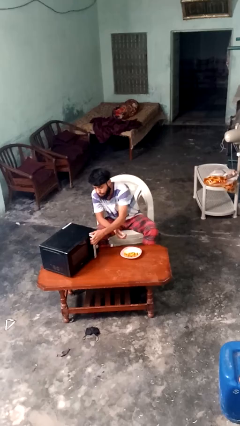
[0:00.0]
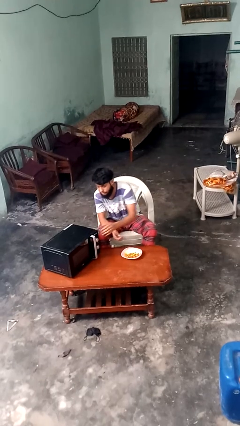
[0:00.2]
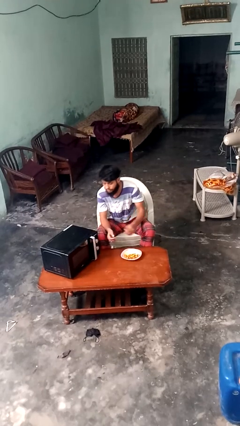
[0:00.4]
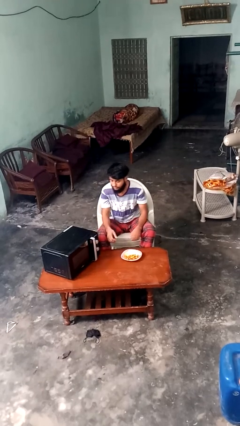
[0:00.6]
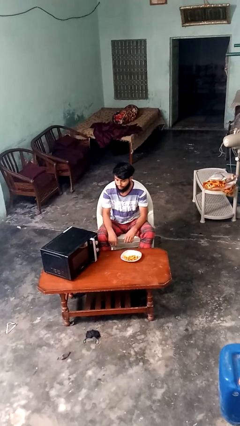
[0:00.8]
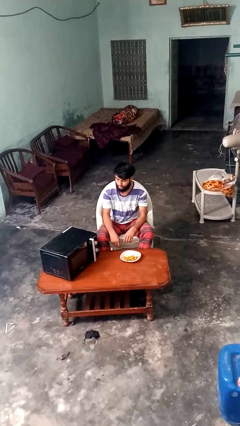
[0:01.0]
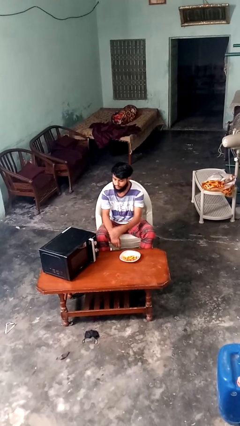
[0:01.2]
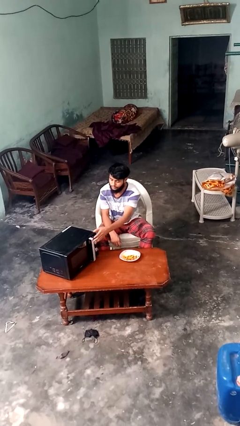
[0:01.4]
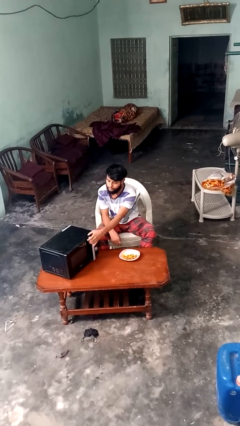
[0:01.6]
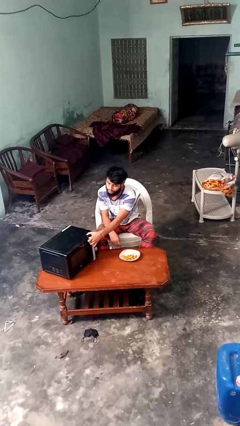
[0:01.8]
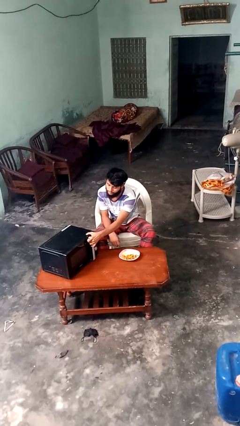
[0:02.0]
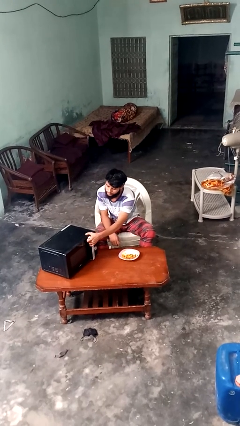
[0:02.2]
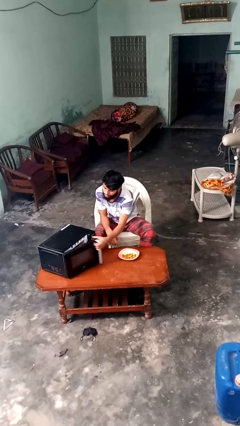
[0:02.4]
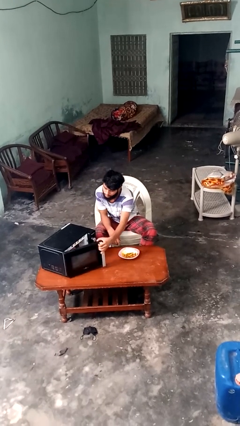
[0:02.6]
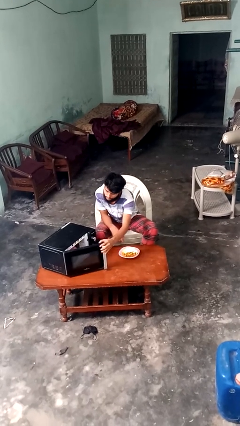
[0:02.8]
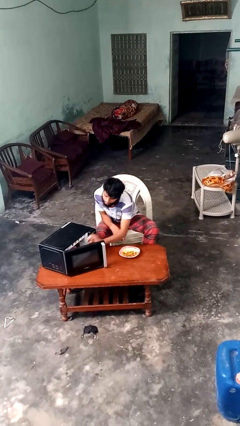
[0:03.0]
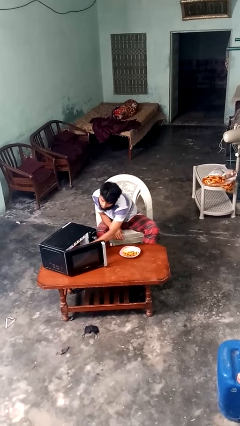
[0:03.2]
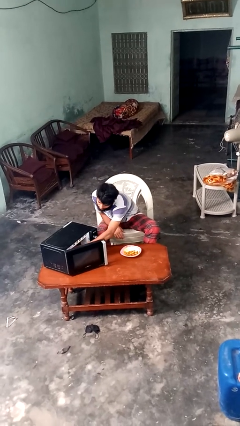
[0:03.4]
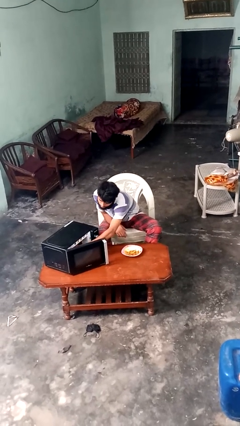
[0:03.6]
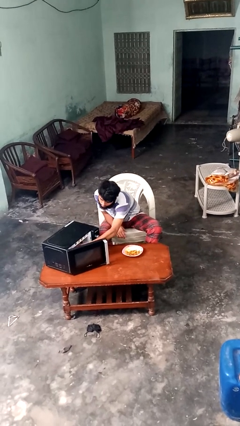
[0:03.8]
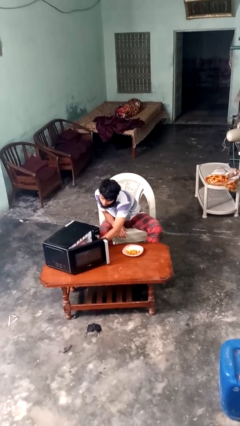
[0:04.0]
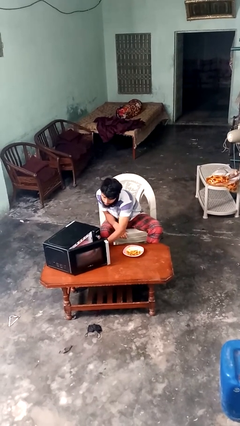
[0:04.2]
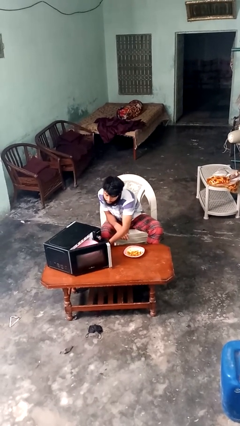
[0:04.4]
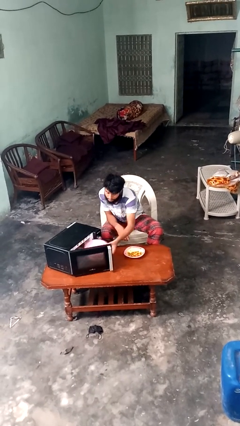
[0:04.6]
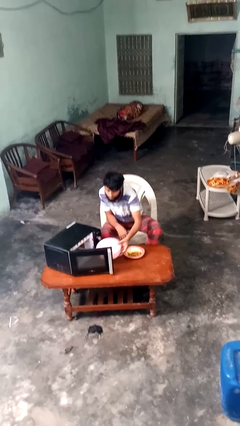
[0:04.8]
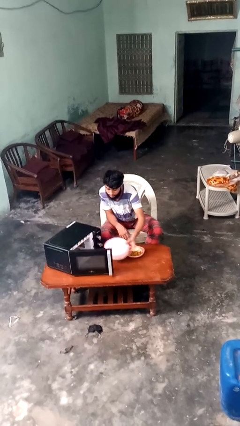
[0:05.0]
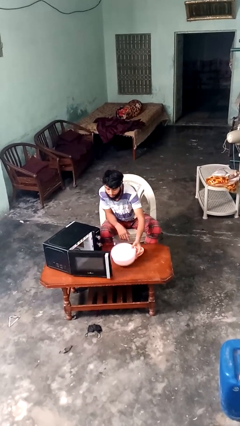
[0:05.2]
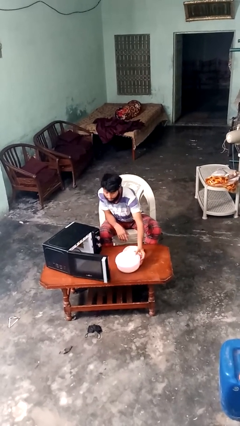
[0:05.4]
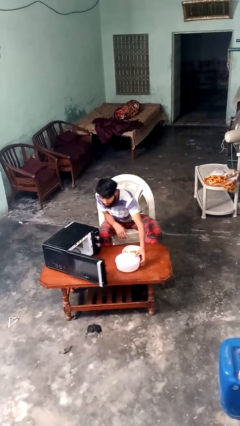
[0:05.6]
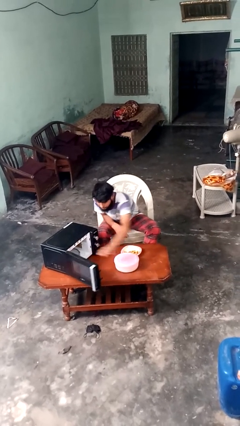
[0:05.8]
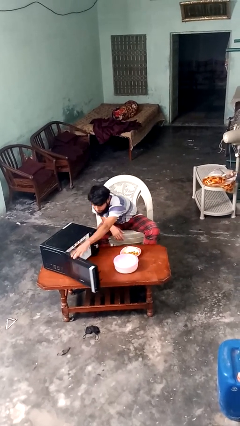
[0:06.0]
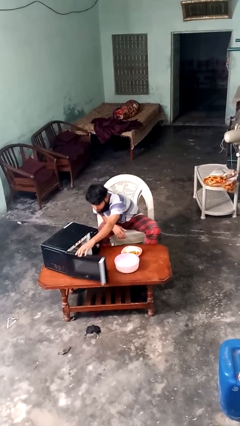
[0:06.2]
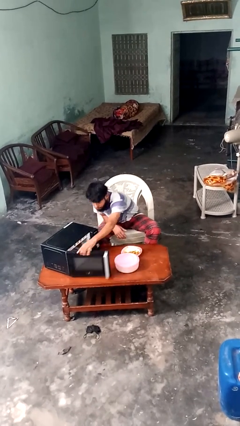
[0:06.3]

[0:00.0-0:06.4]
person takes object from microwave

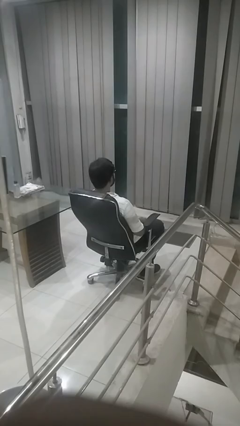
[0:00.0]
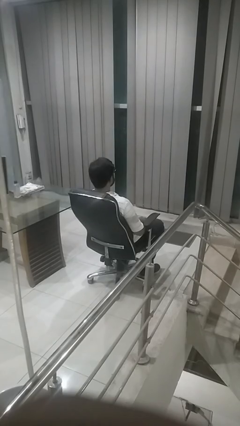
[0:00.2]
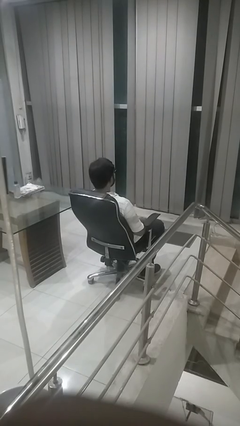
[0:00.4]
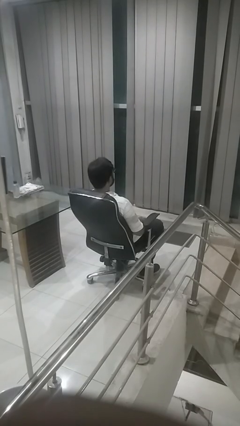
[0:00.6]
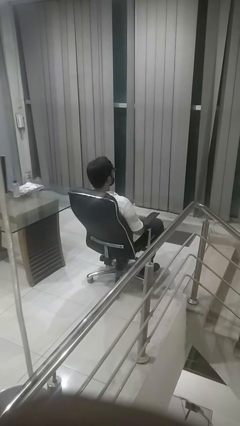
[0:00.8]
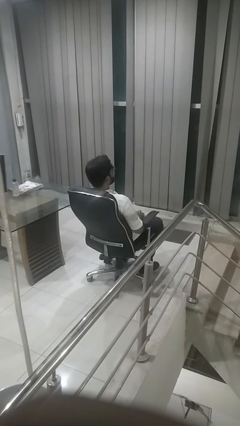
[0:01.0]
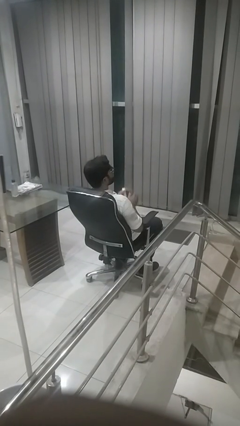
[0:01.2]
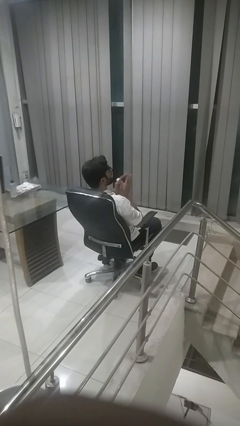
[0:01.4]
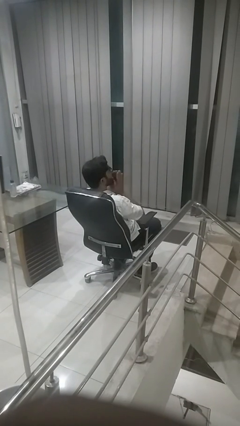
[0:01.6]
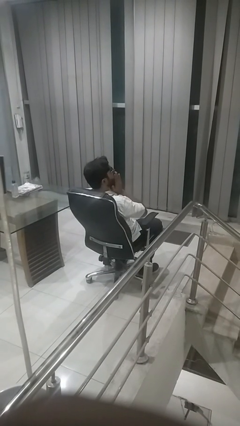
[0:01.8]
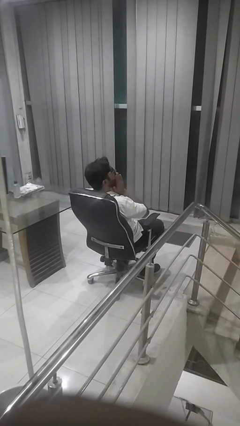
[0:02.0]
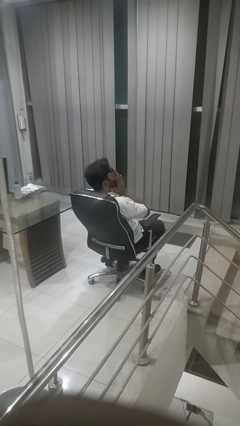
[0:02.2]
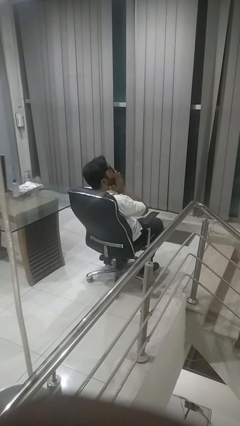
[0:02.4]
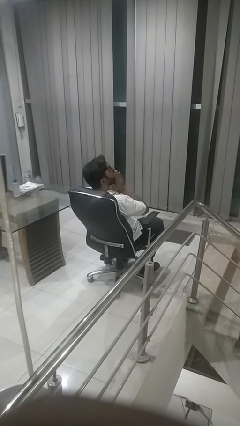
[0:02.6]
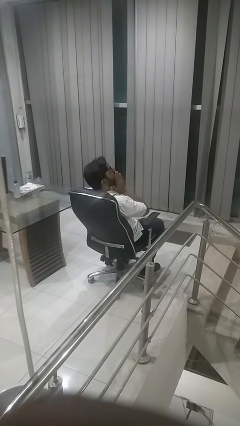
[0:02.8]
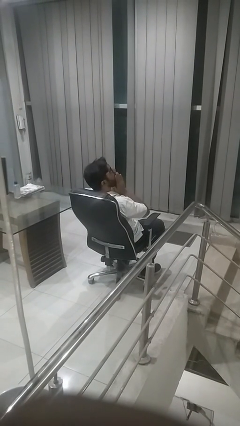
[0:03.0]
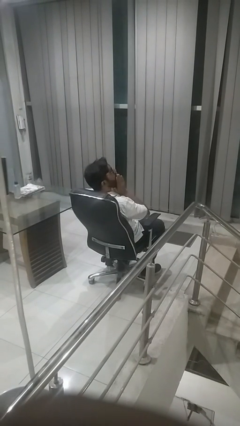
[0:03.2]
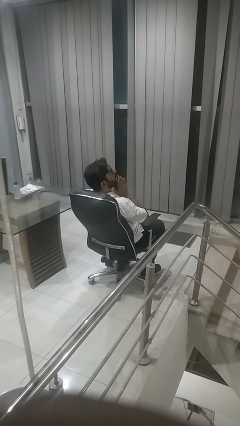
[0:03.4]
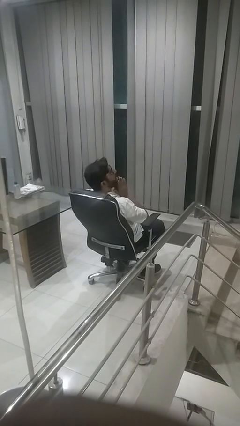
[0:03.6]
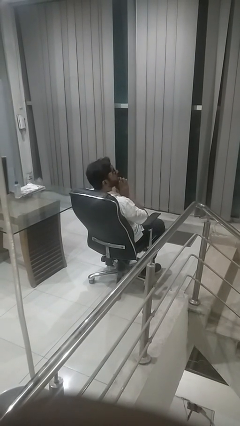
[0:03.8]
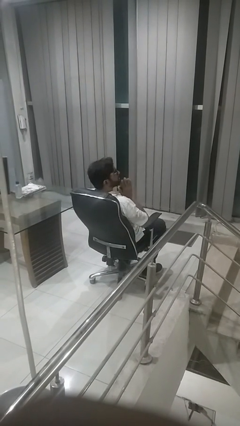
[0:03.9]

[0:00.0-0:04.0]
person yawns

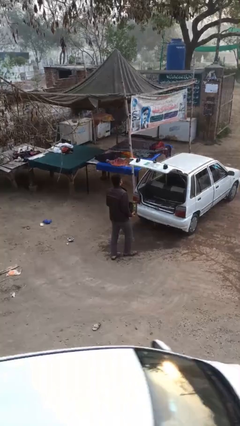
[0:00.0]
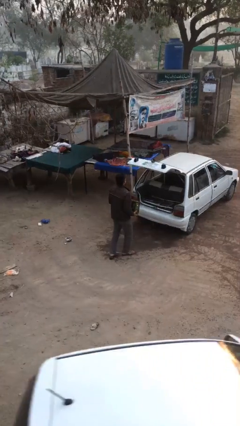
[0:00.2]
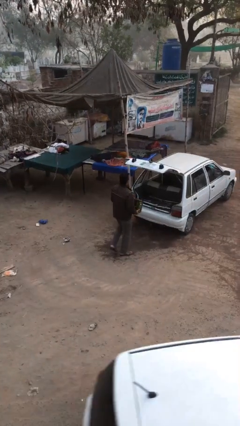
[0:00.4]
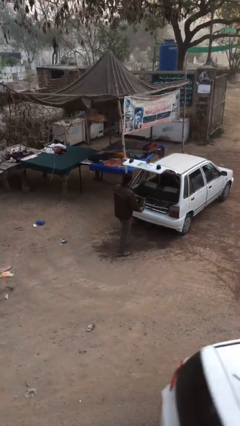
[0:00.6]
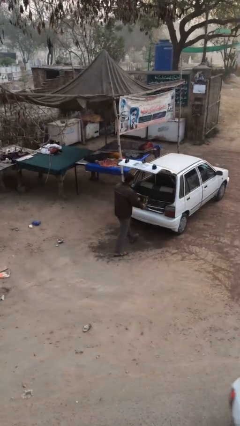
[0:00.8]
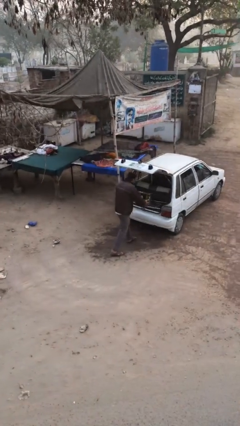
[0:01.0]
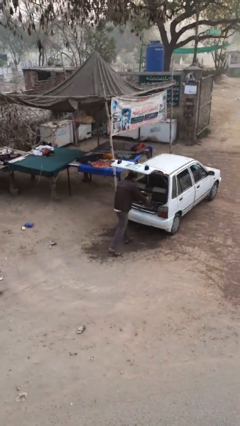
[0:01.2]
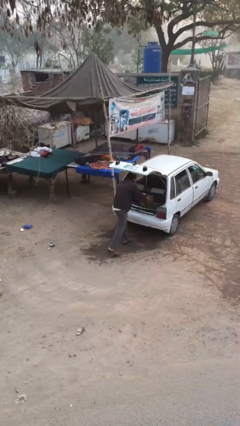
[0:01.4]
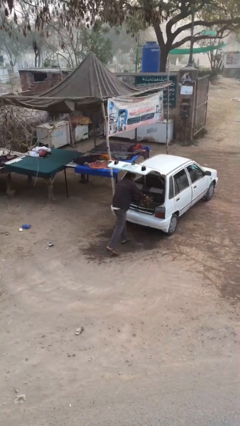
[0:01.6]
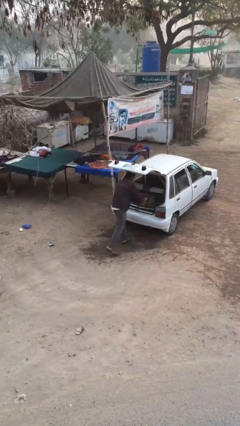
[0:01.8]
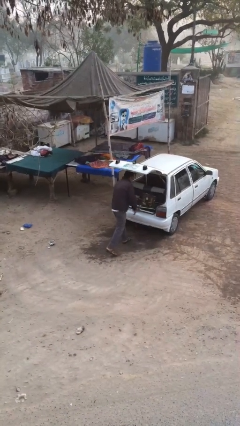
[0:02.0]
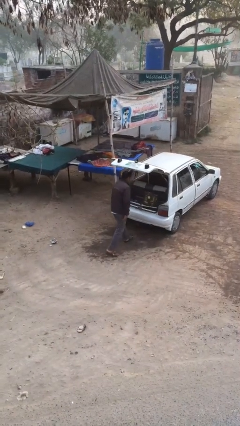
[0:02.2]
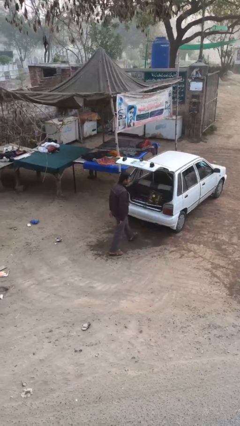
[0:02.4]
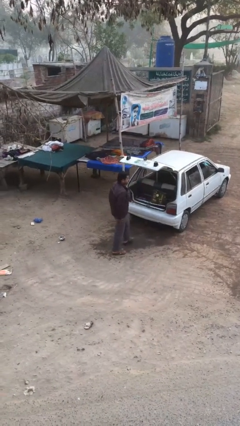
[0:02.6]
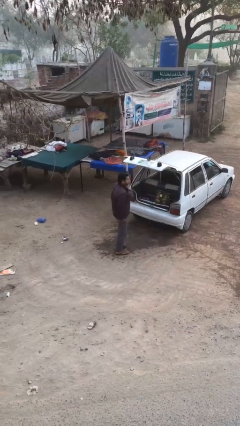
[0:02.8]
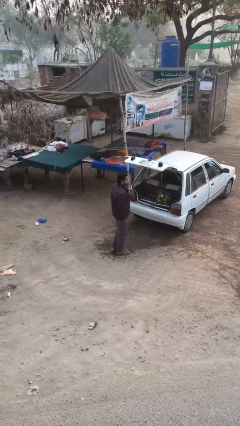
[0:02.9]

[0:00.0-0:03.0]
person loads car

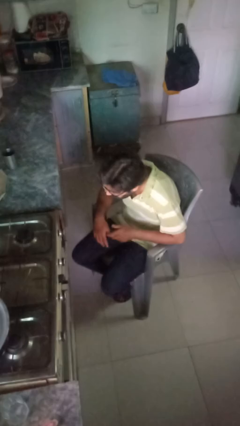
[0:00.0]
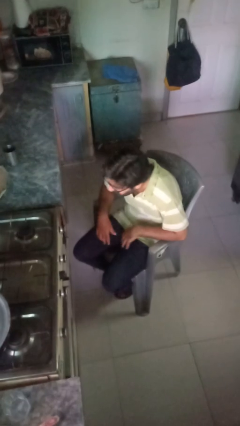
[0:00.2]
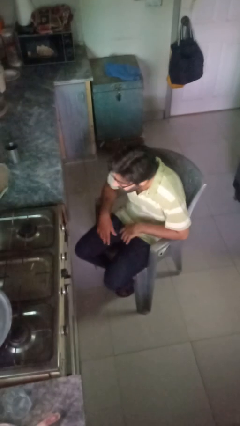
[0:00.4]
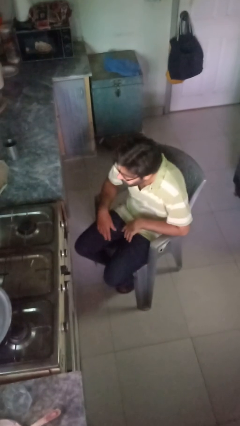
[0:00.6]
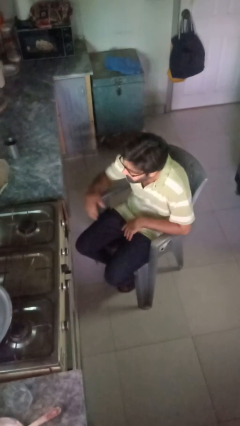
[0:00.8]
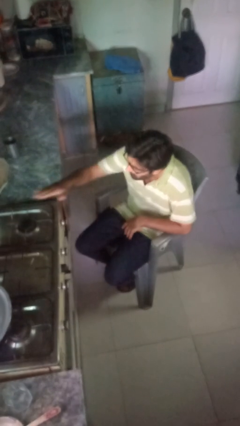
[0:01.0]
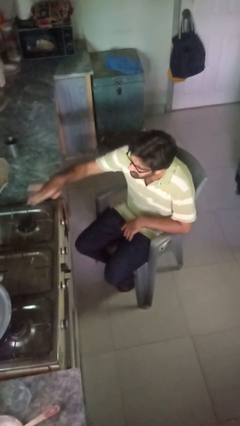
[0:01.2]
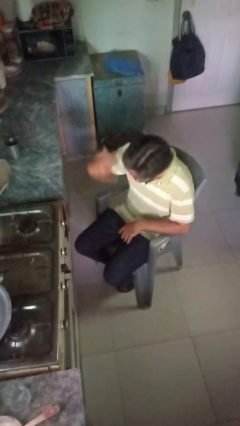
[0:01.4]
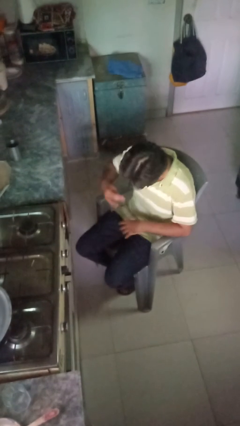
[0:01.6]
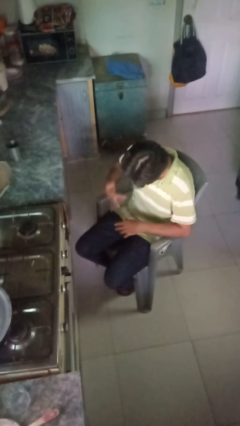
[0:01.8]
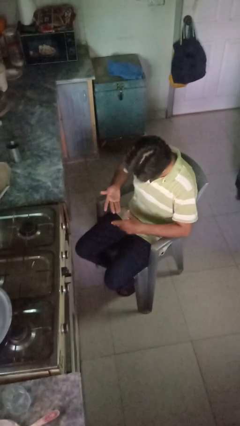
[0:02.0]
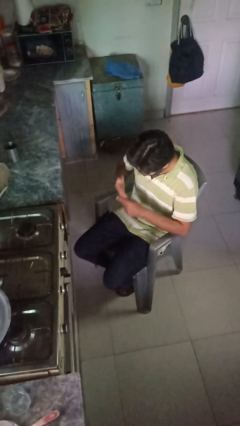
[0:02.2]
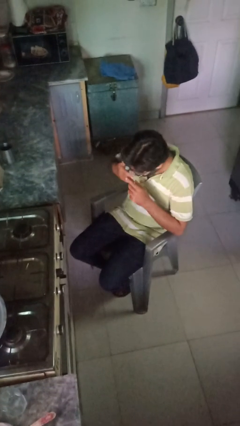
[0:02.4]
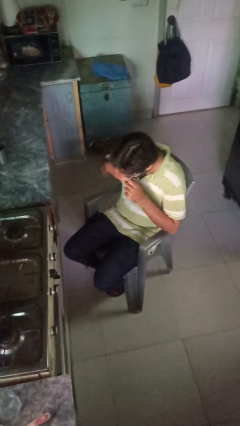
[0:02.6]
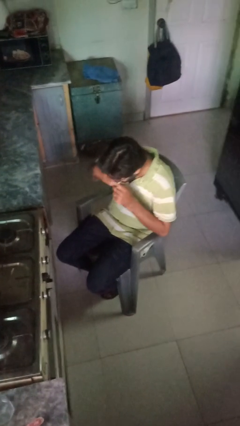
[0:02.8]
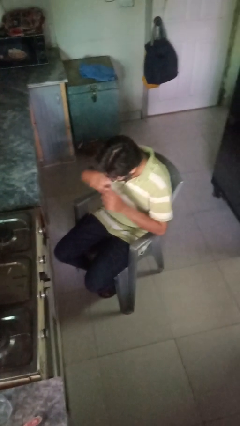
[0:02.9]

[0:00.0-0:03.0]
person burns hand

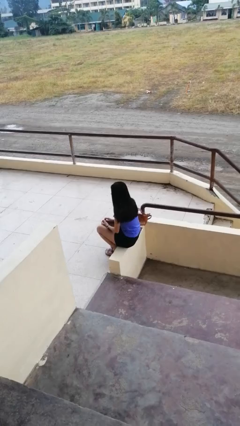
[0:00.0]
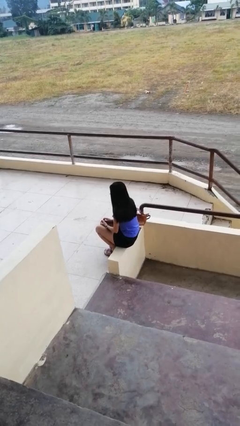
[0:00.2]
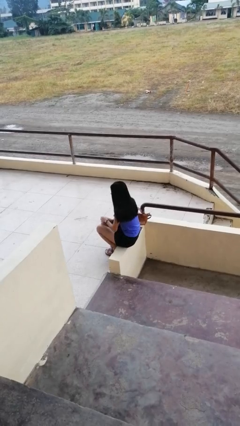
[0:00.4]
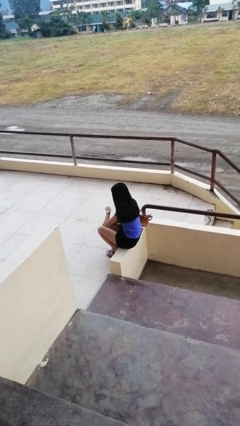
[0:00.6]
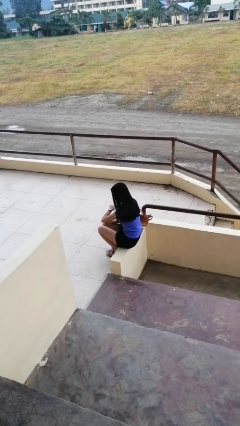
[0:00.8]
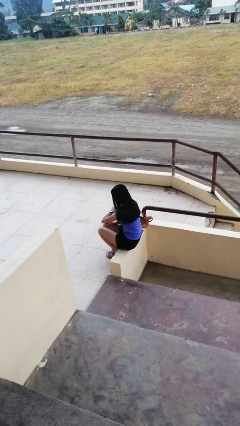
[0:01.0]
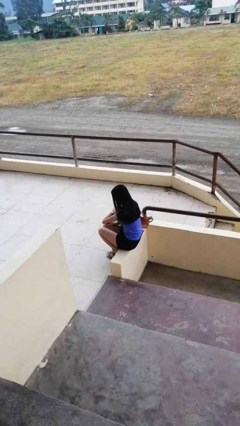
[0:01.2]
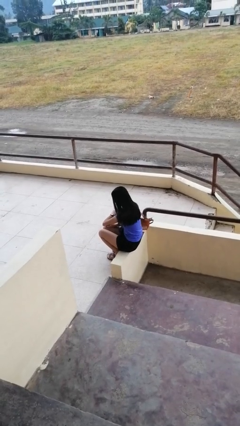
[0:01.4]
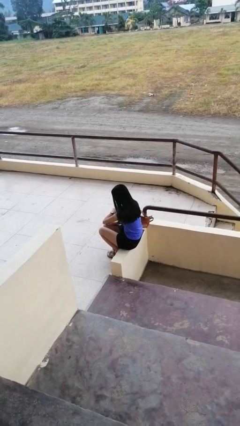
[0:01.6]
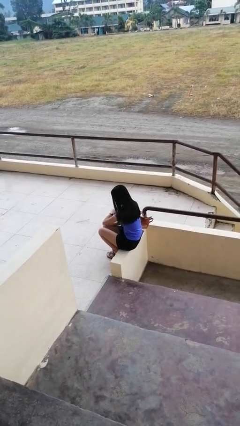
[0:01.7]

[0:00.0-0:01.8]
person looks at wristwatch
